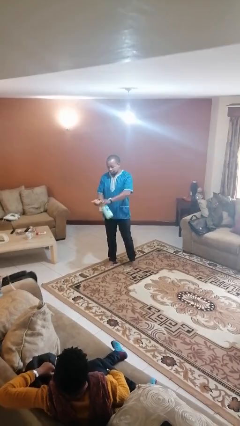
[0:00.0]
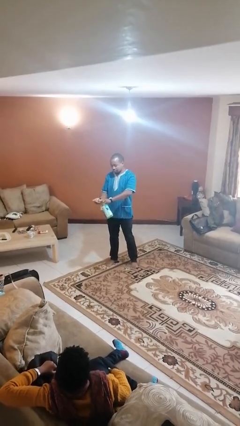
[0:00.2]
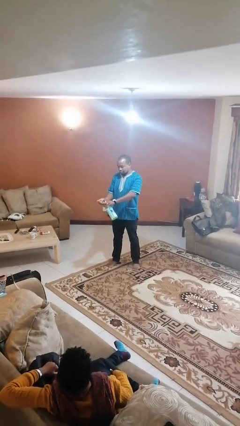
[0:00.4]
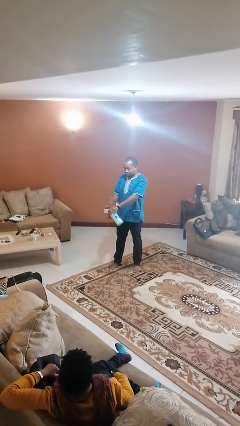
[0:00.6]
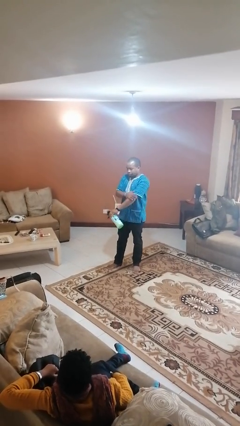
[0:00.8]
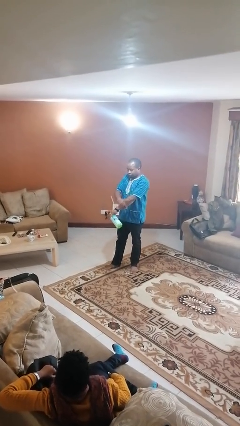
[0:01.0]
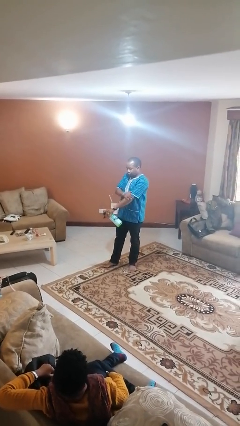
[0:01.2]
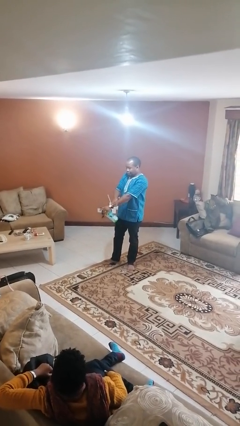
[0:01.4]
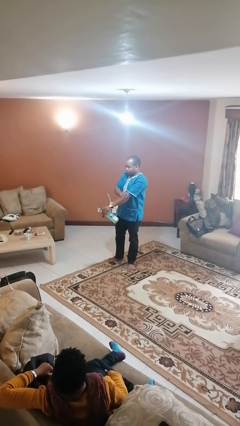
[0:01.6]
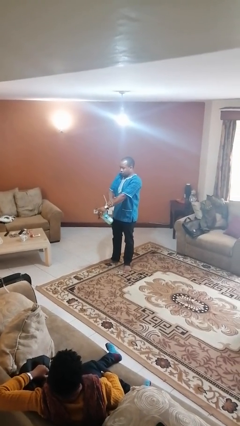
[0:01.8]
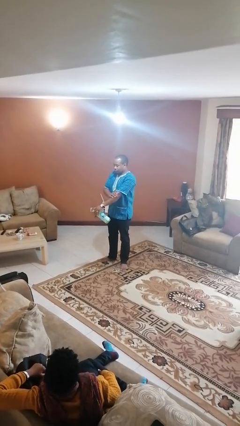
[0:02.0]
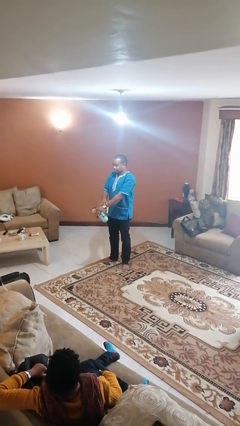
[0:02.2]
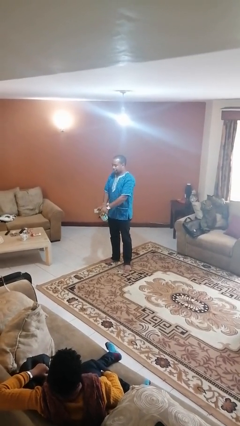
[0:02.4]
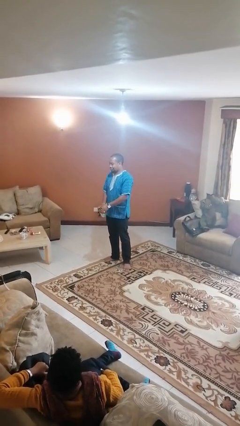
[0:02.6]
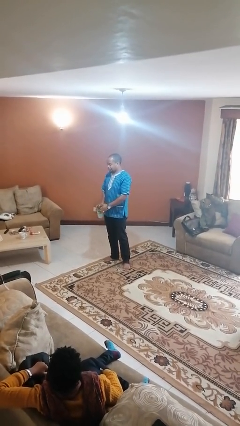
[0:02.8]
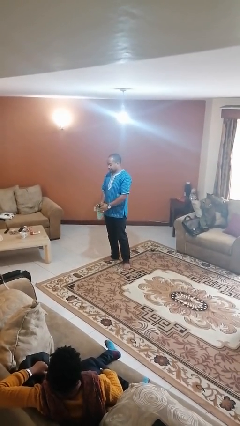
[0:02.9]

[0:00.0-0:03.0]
person applies sunscreen

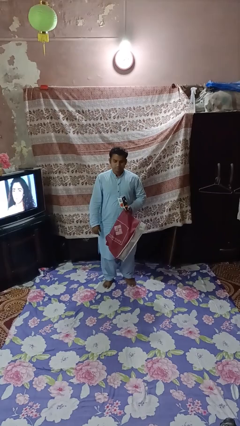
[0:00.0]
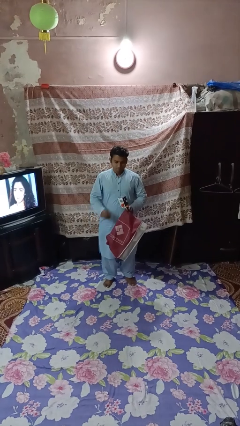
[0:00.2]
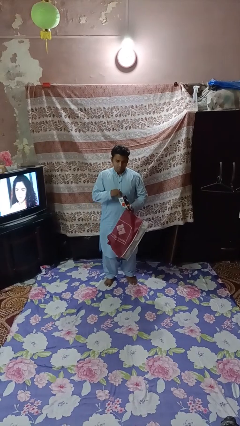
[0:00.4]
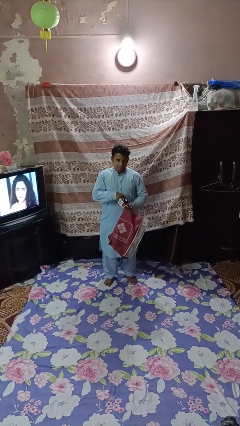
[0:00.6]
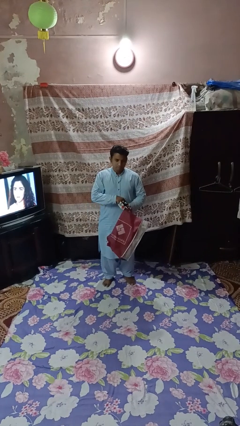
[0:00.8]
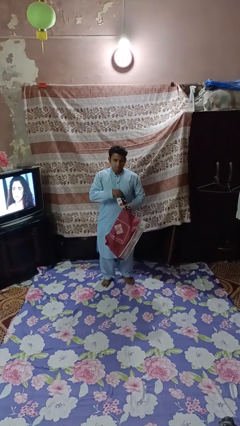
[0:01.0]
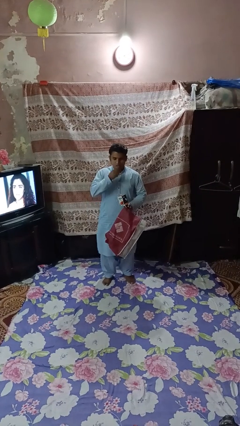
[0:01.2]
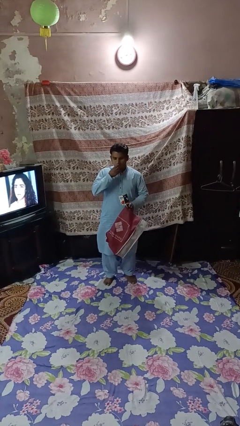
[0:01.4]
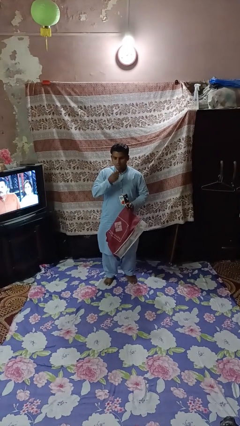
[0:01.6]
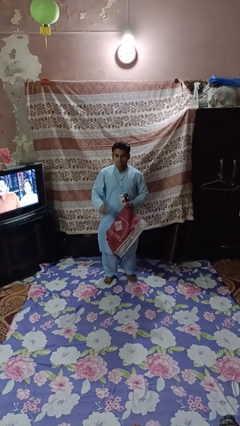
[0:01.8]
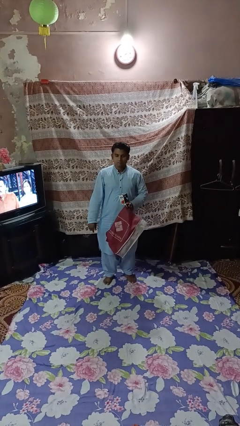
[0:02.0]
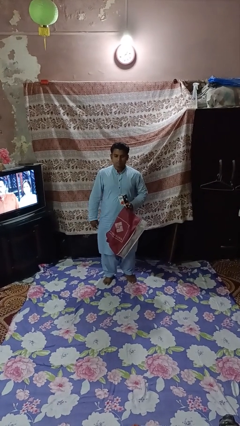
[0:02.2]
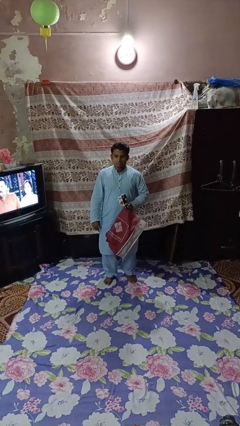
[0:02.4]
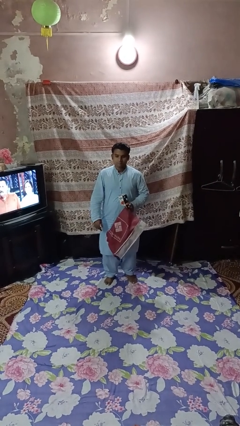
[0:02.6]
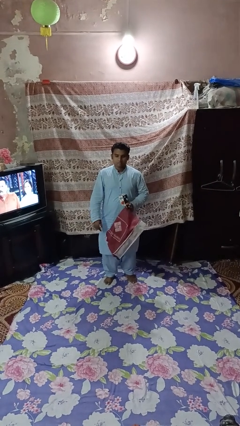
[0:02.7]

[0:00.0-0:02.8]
person eats snack from bag

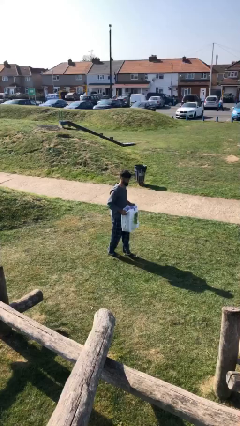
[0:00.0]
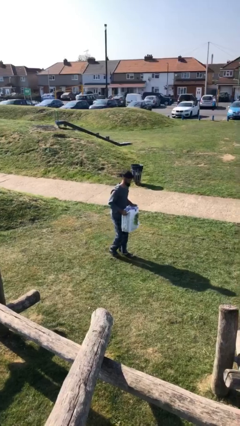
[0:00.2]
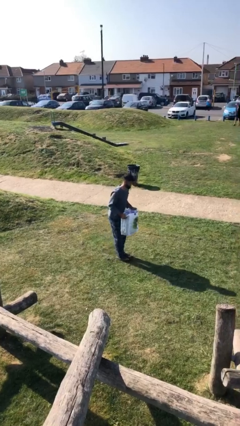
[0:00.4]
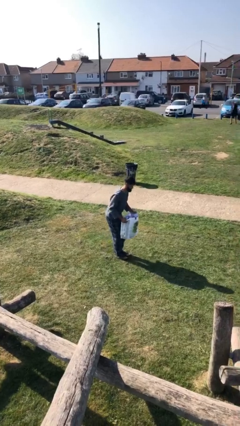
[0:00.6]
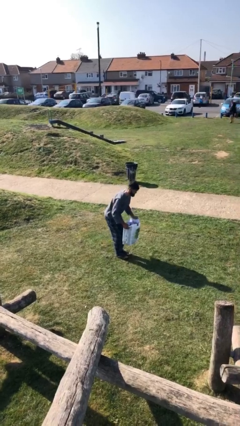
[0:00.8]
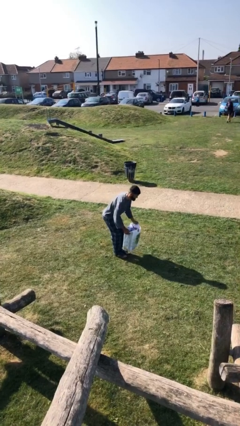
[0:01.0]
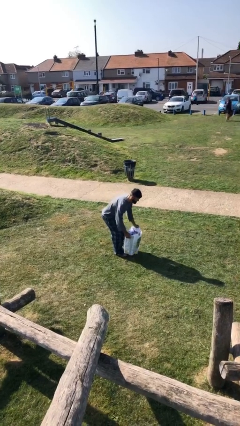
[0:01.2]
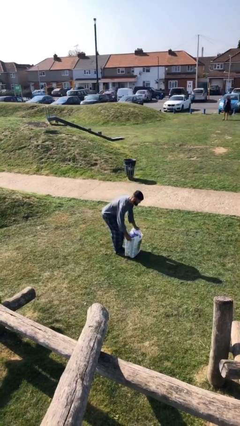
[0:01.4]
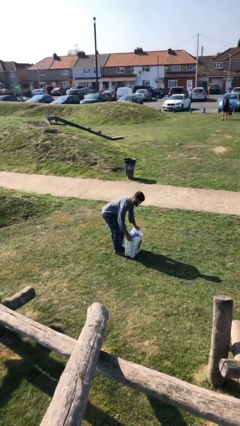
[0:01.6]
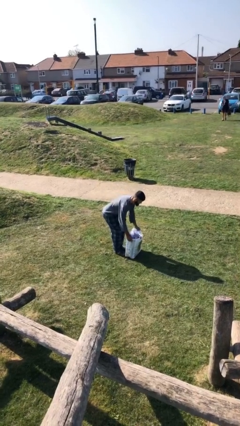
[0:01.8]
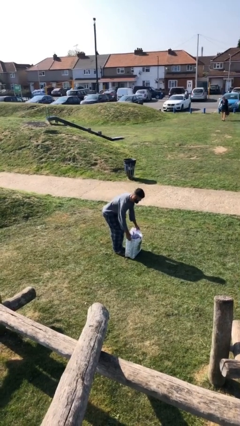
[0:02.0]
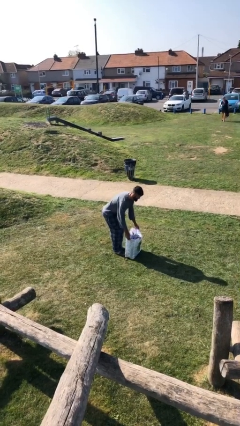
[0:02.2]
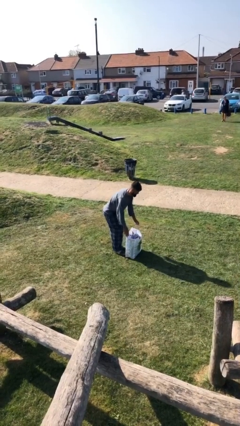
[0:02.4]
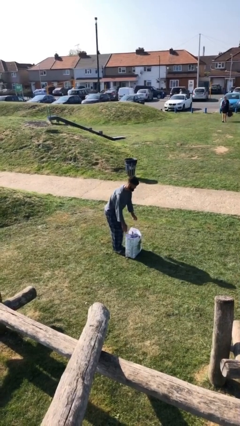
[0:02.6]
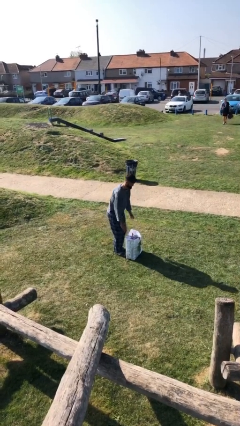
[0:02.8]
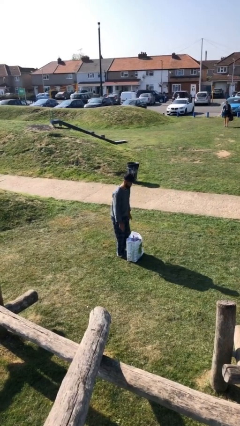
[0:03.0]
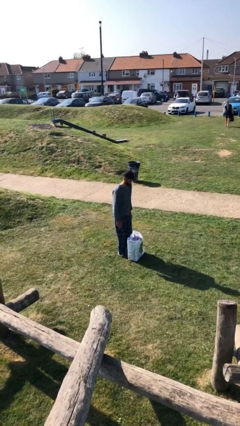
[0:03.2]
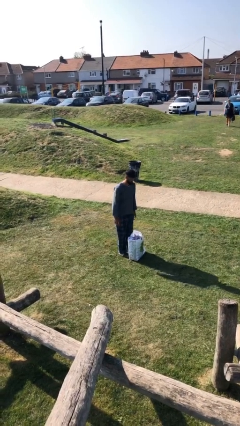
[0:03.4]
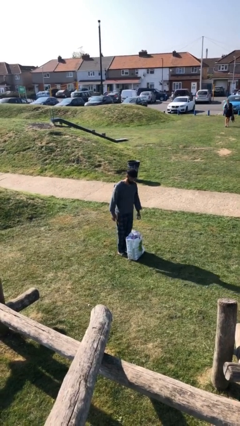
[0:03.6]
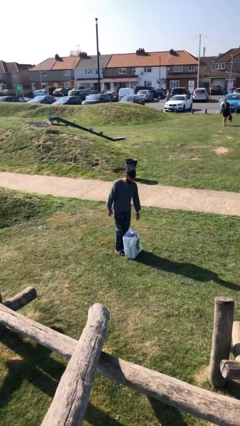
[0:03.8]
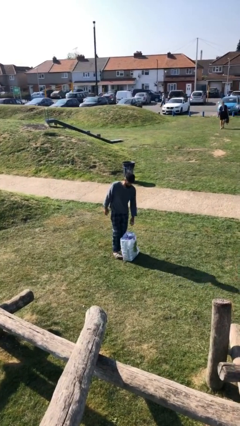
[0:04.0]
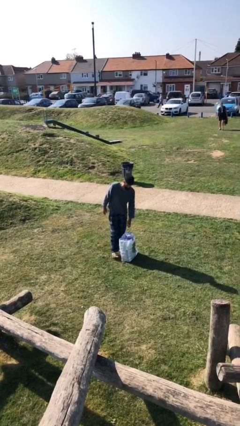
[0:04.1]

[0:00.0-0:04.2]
person puts down object on floor

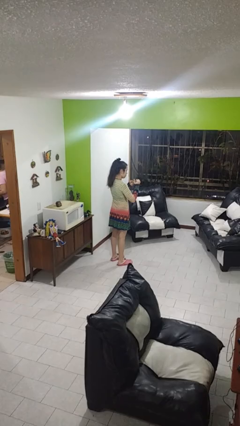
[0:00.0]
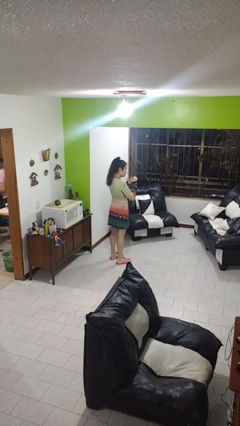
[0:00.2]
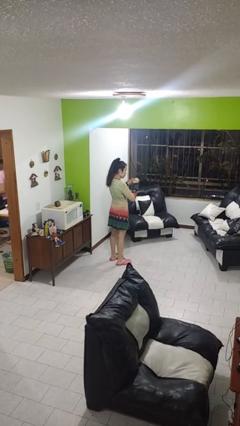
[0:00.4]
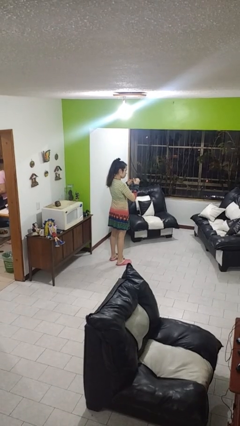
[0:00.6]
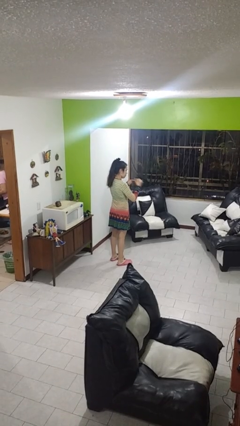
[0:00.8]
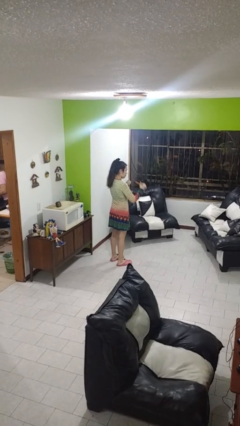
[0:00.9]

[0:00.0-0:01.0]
person files fingernails

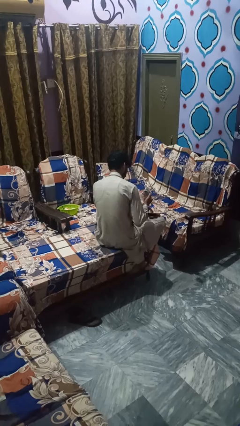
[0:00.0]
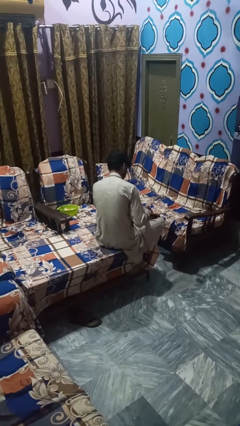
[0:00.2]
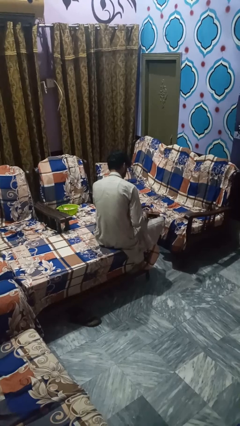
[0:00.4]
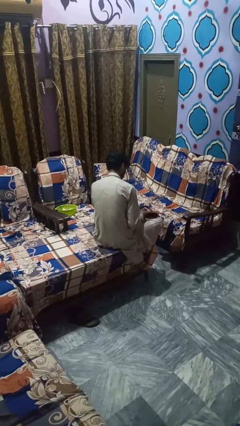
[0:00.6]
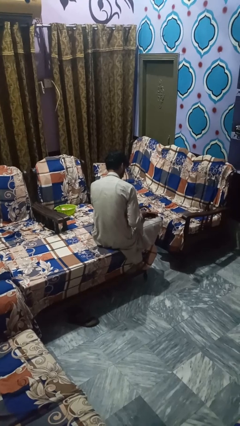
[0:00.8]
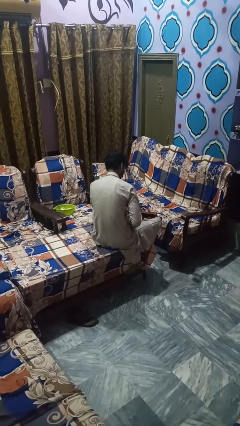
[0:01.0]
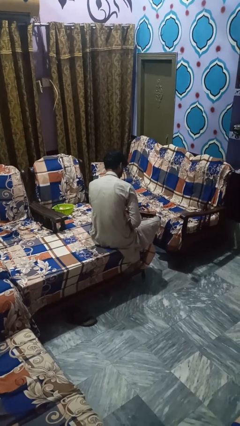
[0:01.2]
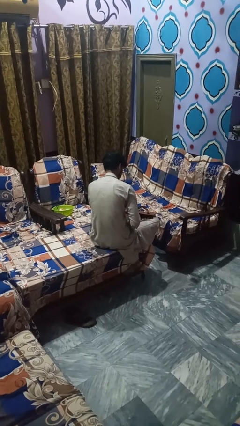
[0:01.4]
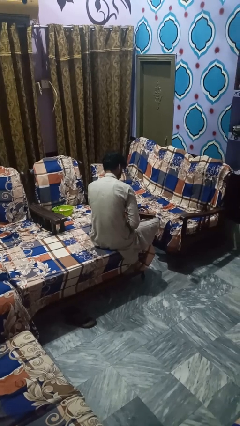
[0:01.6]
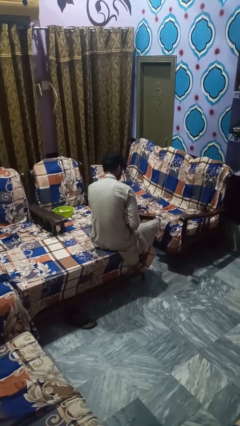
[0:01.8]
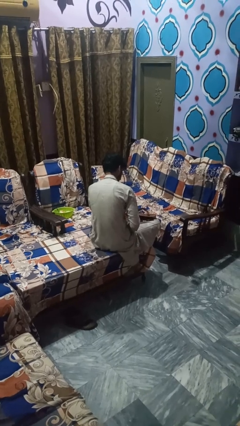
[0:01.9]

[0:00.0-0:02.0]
person puts object into bag

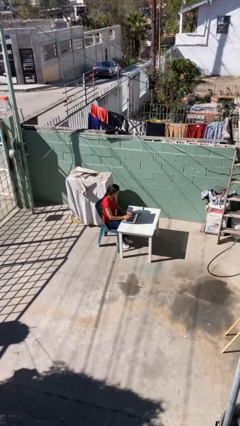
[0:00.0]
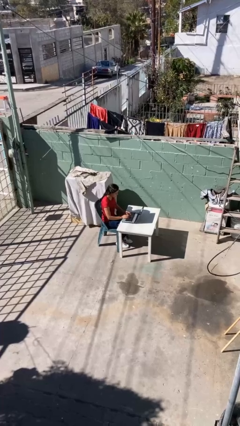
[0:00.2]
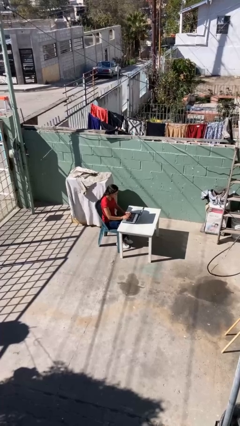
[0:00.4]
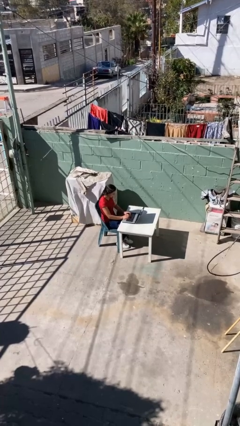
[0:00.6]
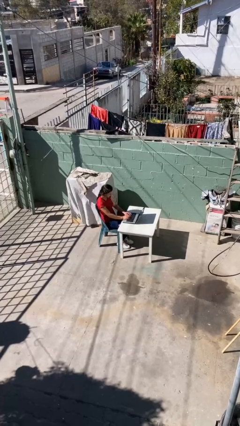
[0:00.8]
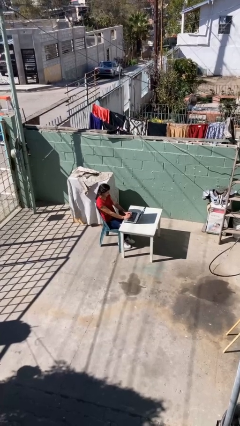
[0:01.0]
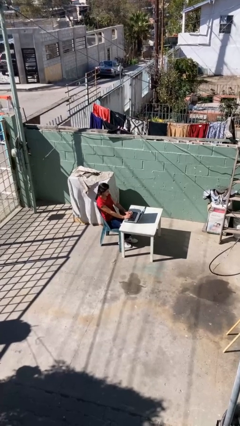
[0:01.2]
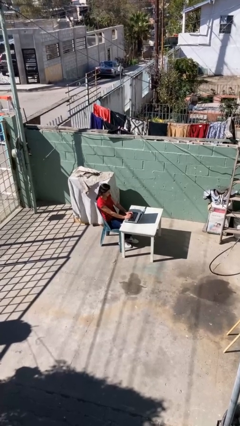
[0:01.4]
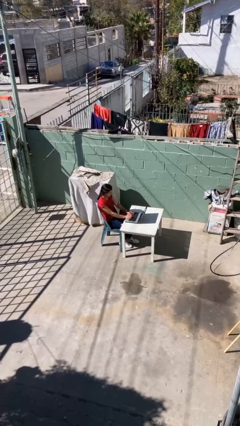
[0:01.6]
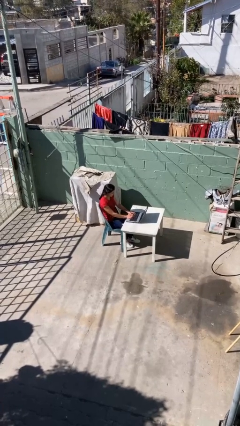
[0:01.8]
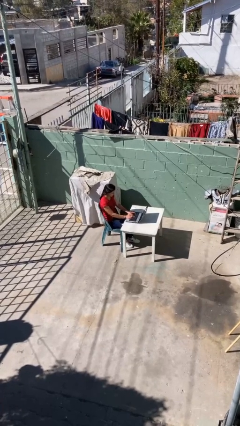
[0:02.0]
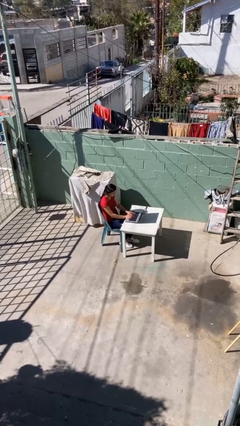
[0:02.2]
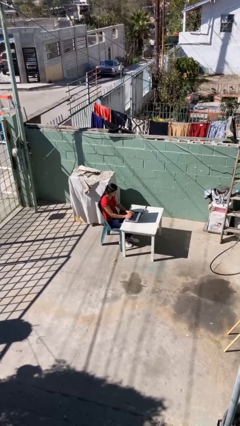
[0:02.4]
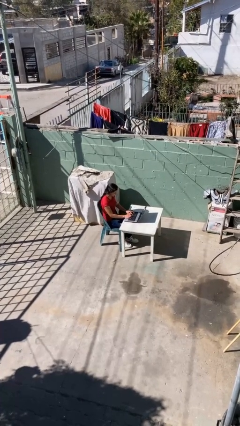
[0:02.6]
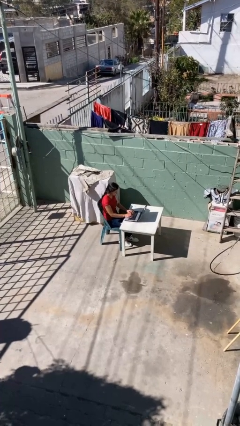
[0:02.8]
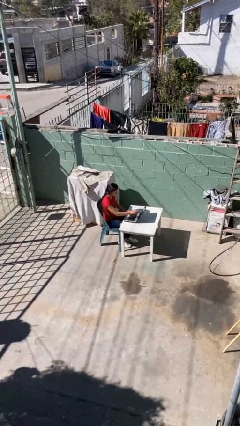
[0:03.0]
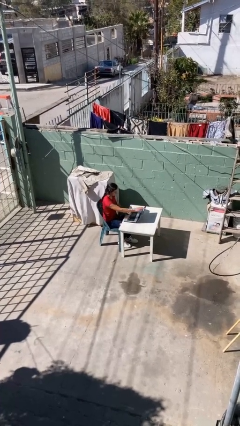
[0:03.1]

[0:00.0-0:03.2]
person interacts with laptop

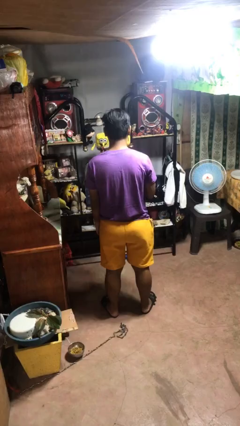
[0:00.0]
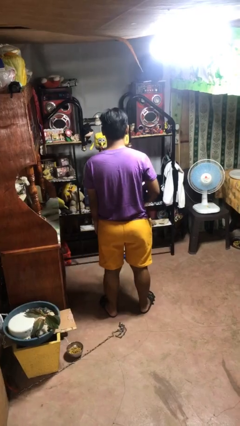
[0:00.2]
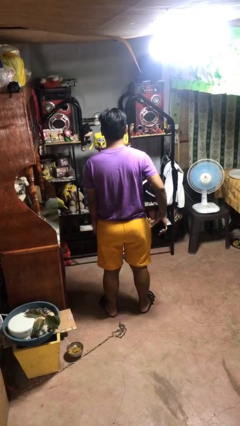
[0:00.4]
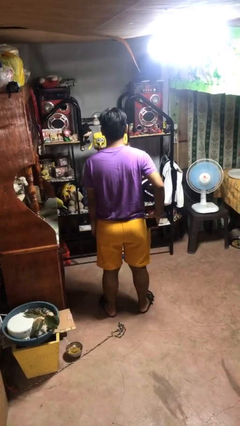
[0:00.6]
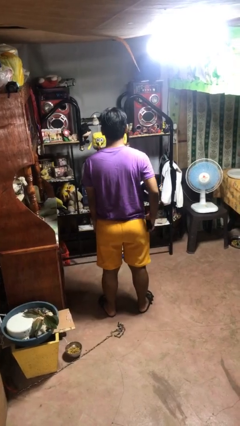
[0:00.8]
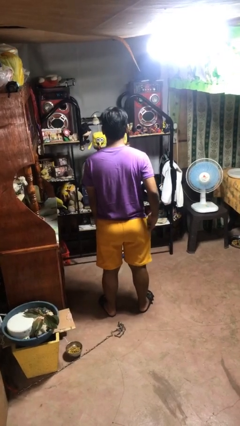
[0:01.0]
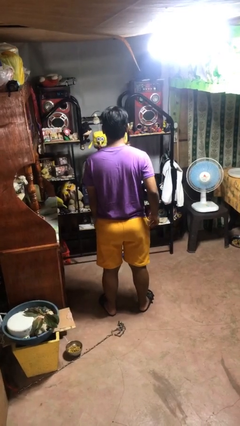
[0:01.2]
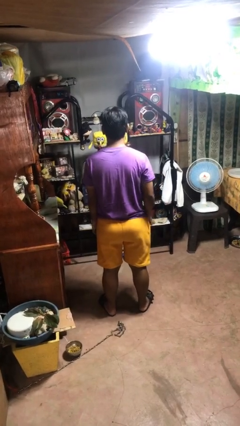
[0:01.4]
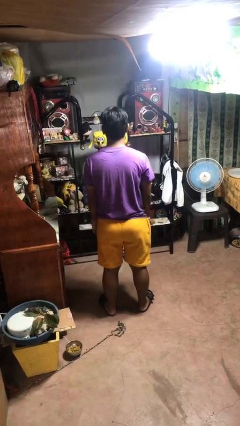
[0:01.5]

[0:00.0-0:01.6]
person puts phone into pocket
